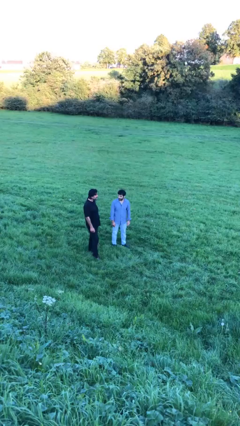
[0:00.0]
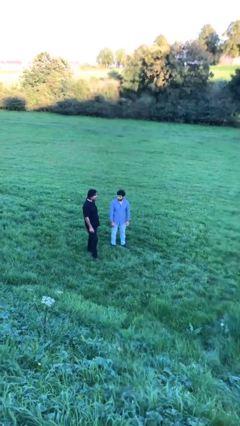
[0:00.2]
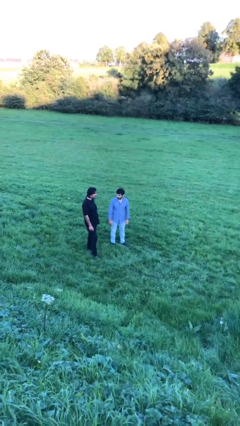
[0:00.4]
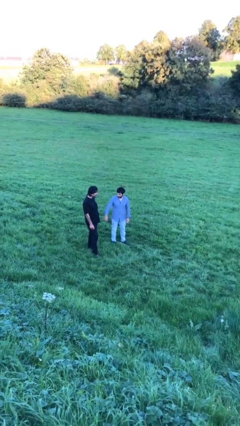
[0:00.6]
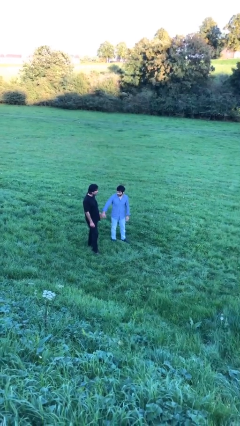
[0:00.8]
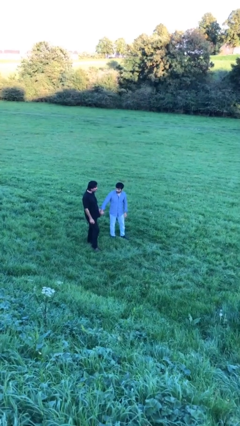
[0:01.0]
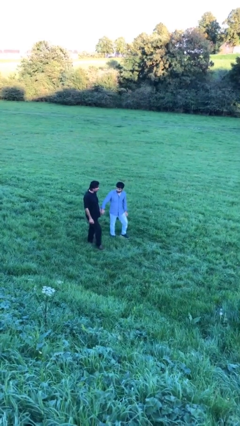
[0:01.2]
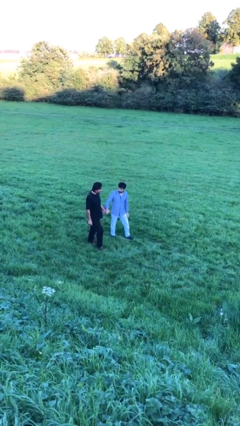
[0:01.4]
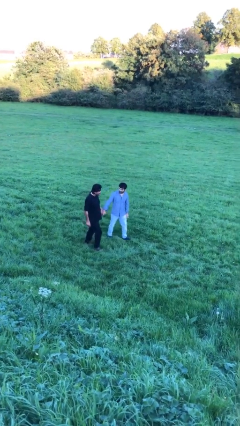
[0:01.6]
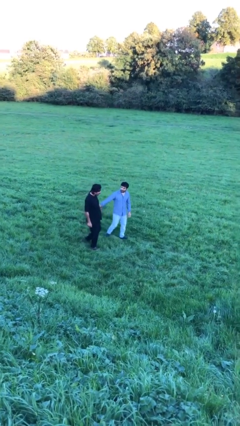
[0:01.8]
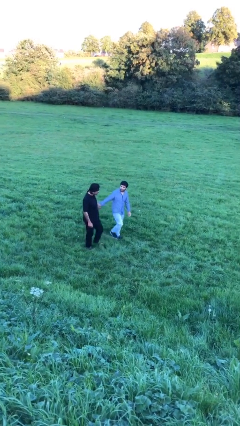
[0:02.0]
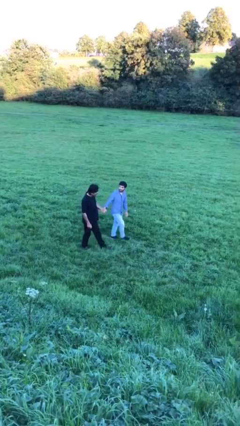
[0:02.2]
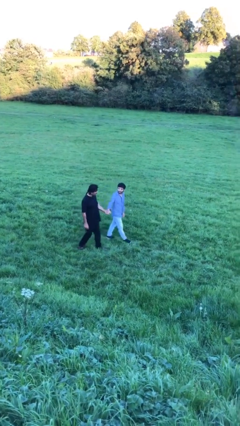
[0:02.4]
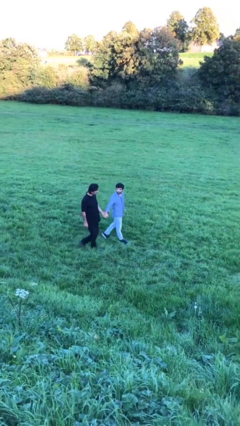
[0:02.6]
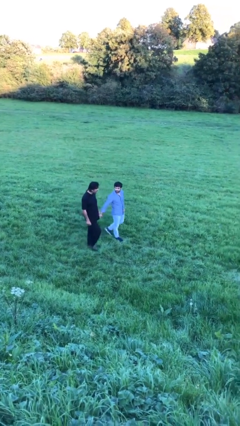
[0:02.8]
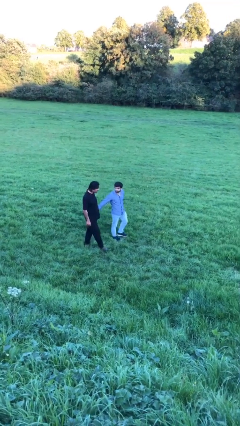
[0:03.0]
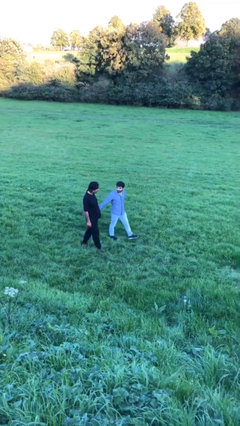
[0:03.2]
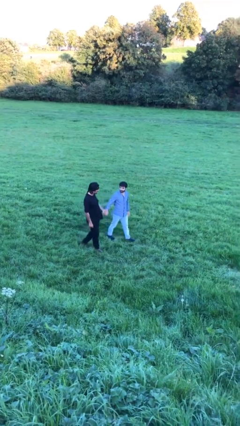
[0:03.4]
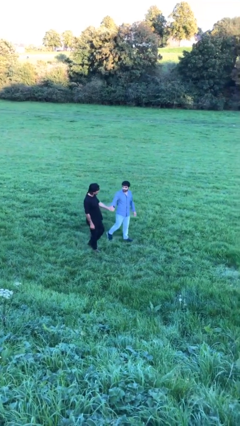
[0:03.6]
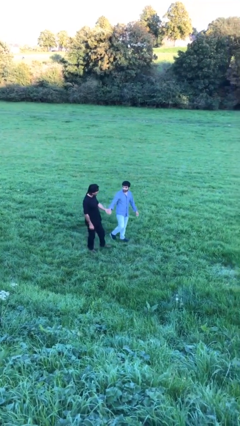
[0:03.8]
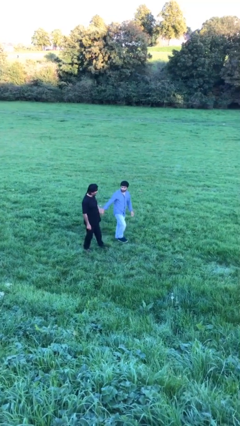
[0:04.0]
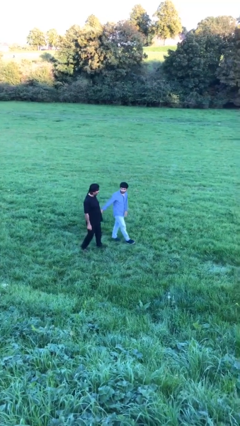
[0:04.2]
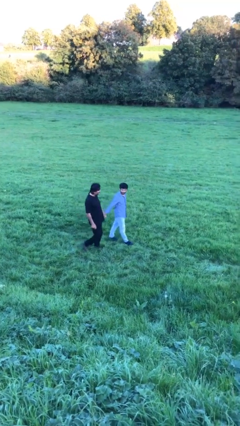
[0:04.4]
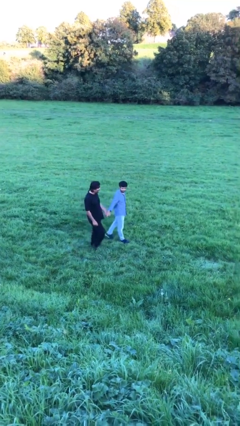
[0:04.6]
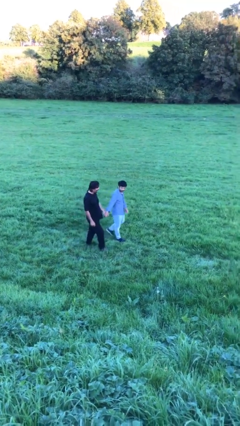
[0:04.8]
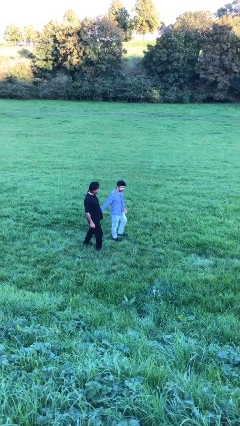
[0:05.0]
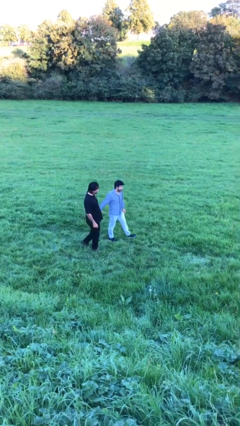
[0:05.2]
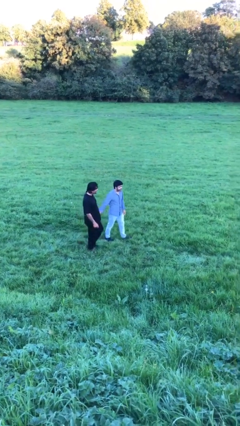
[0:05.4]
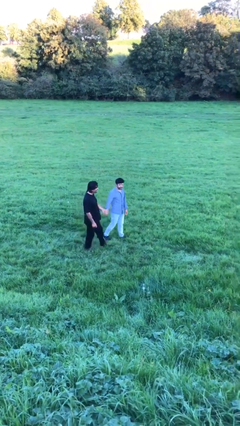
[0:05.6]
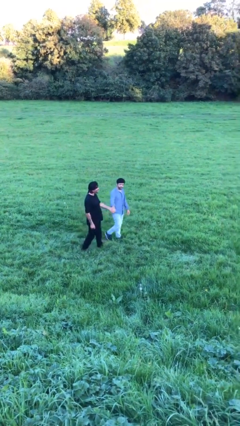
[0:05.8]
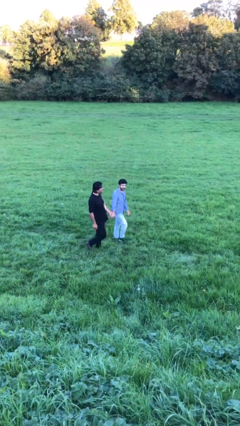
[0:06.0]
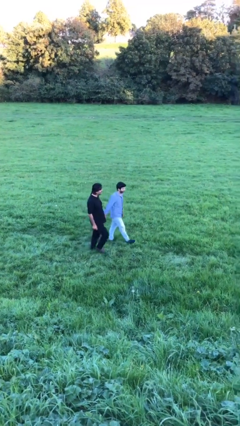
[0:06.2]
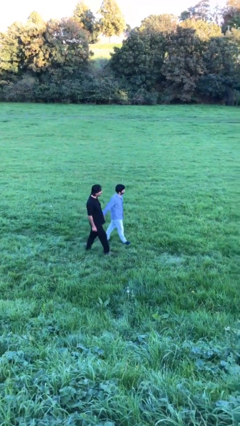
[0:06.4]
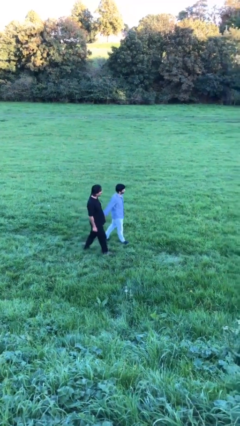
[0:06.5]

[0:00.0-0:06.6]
person holds hand

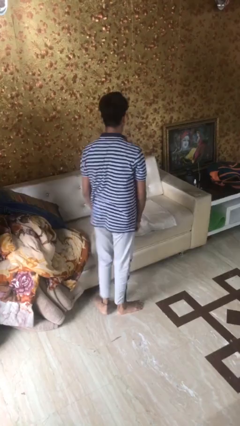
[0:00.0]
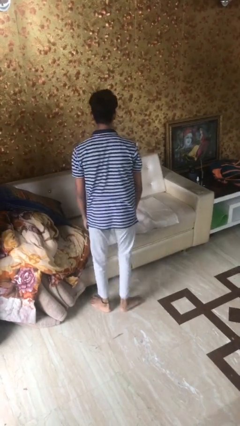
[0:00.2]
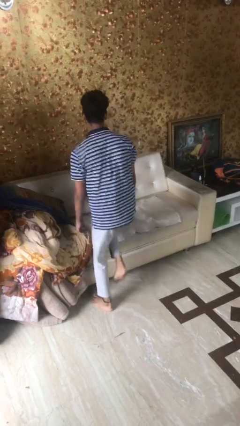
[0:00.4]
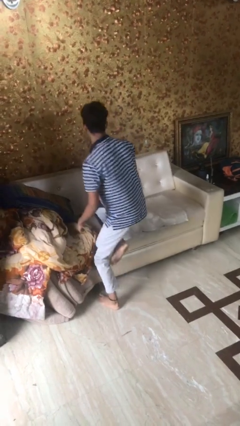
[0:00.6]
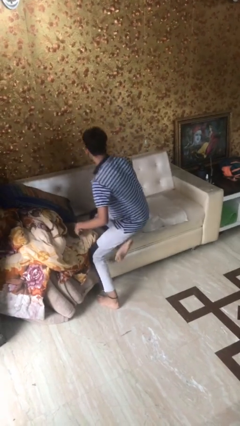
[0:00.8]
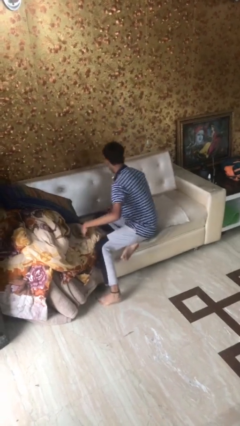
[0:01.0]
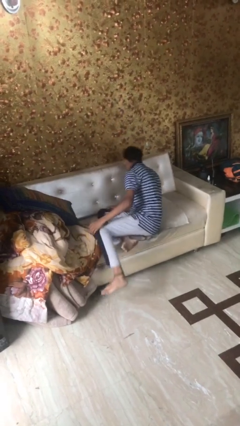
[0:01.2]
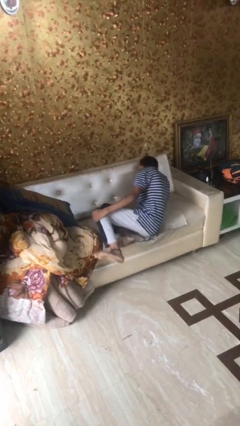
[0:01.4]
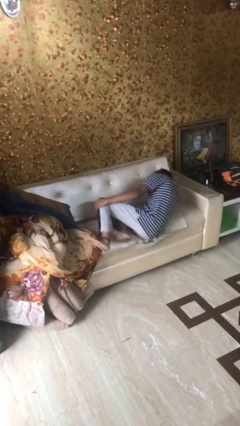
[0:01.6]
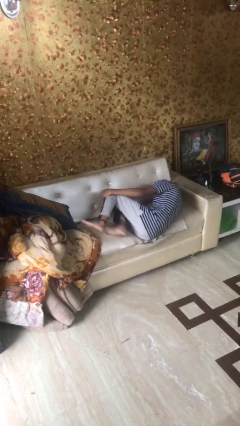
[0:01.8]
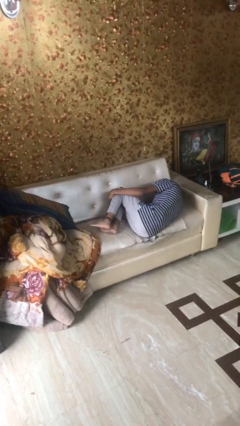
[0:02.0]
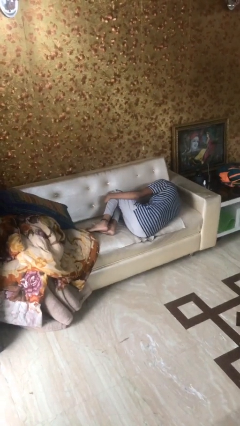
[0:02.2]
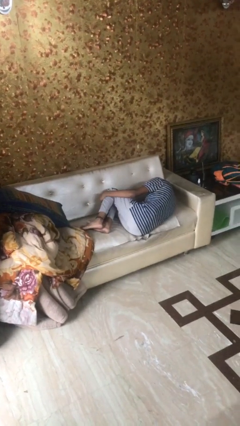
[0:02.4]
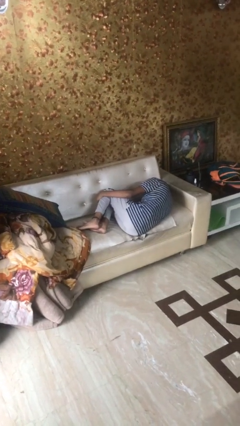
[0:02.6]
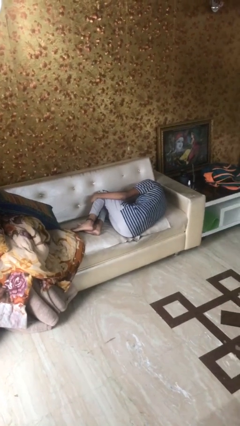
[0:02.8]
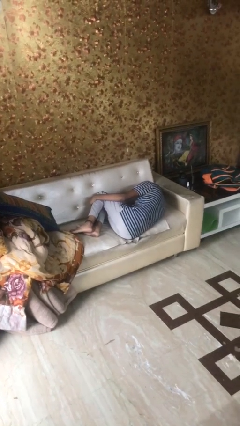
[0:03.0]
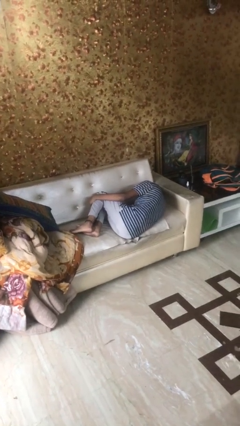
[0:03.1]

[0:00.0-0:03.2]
person lies down on couch

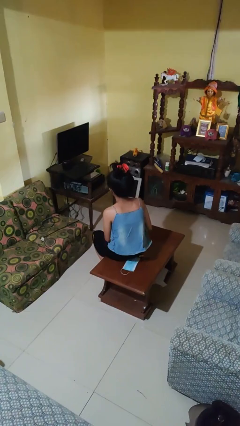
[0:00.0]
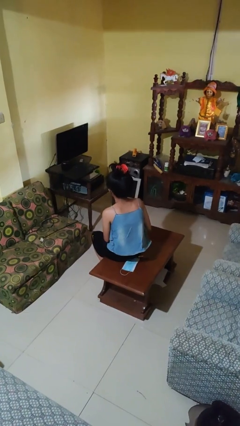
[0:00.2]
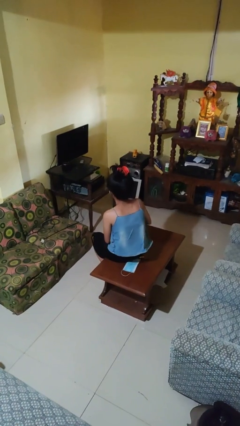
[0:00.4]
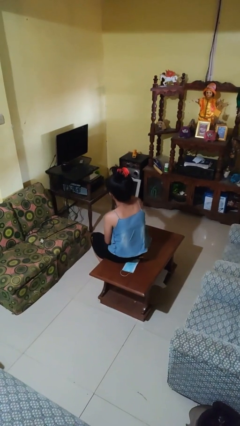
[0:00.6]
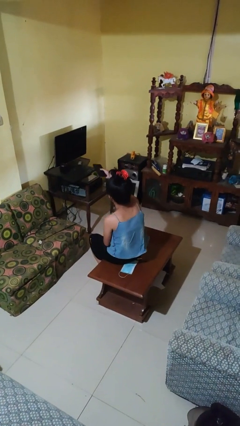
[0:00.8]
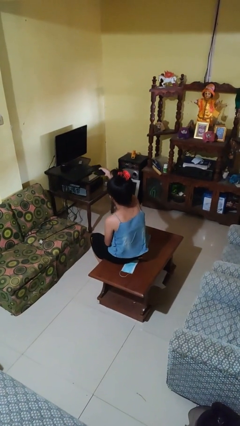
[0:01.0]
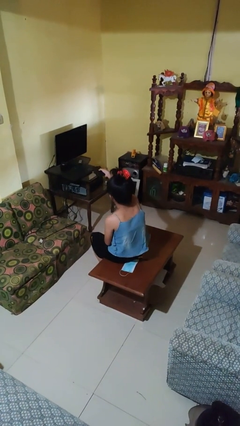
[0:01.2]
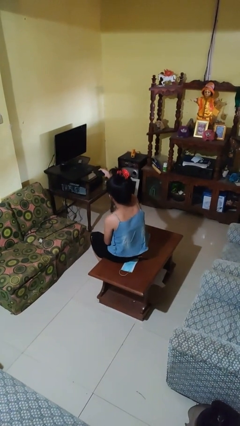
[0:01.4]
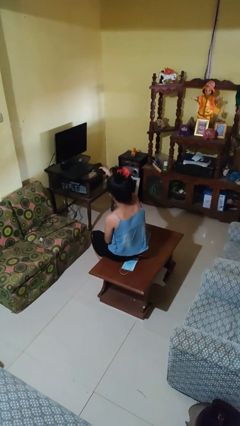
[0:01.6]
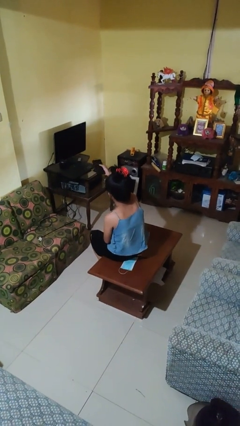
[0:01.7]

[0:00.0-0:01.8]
person uses television remote

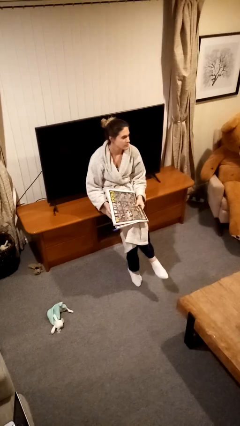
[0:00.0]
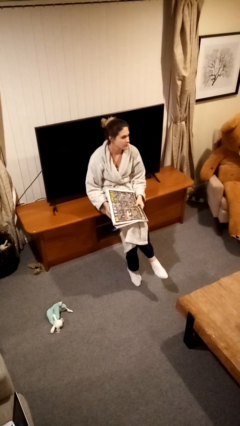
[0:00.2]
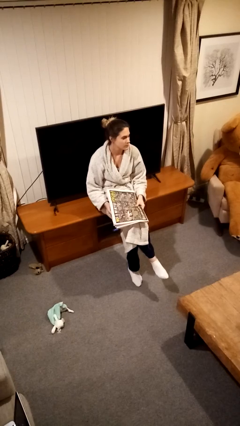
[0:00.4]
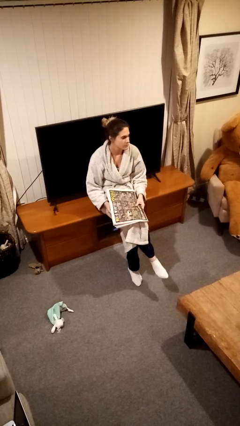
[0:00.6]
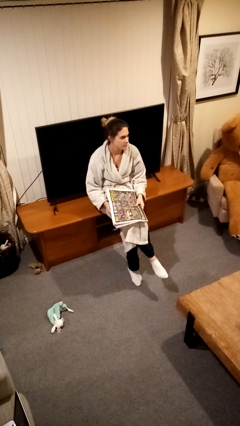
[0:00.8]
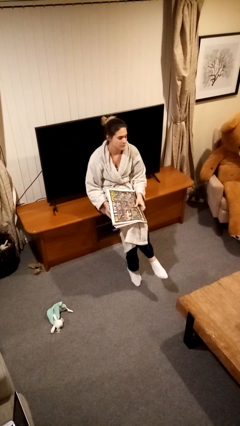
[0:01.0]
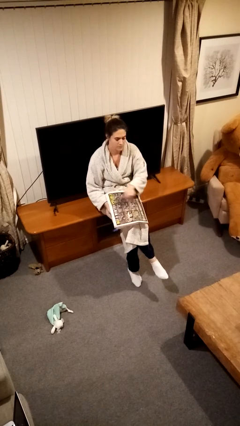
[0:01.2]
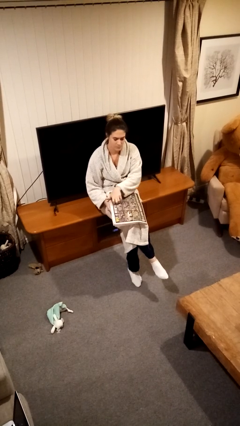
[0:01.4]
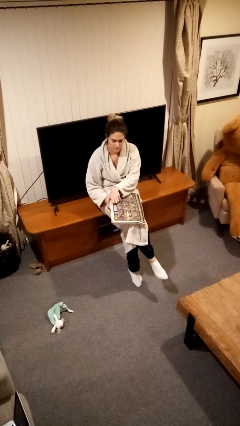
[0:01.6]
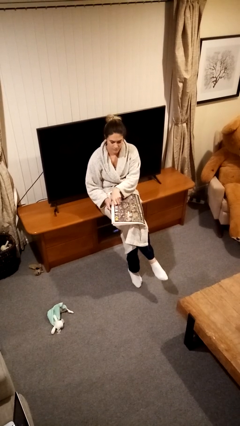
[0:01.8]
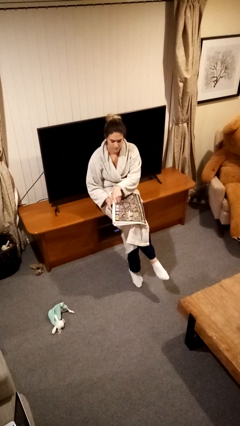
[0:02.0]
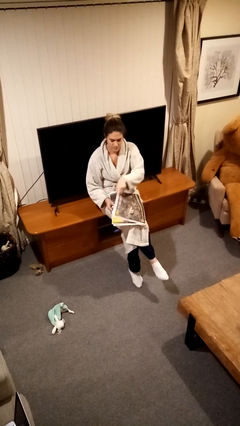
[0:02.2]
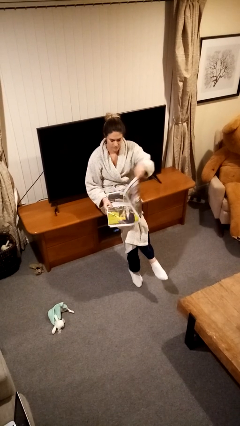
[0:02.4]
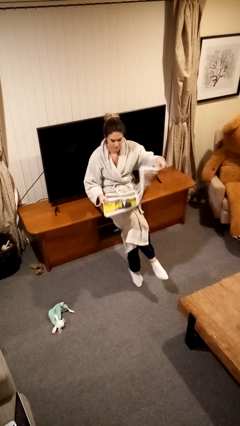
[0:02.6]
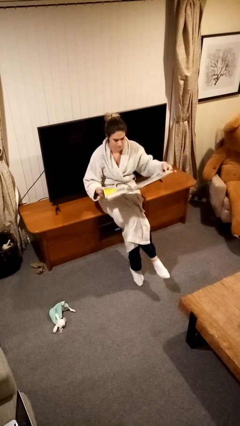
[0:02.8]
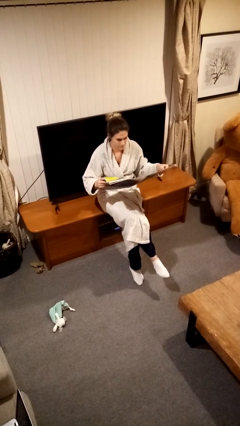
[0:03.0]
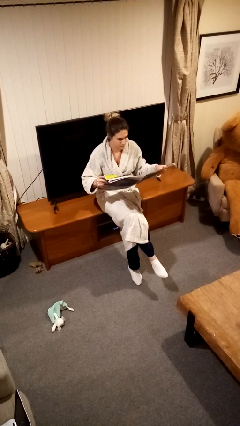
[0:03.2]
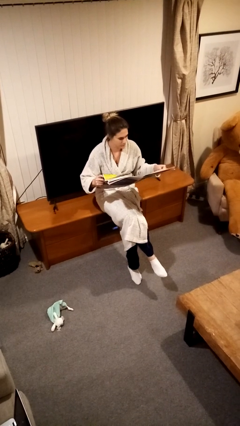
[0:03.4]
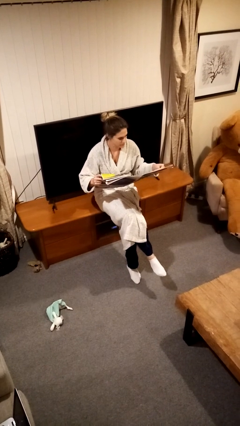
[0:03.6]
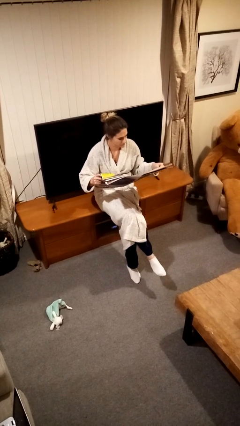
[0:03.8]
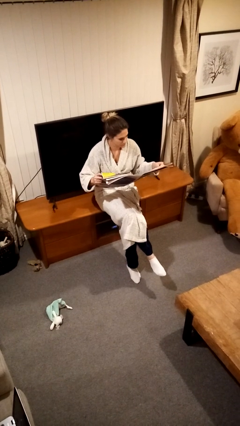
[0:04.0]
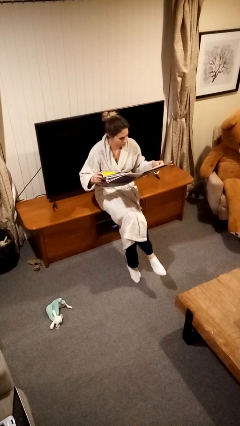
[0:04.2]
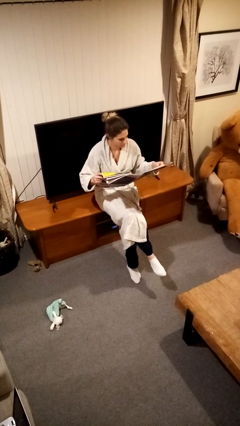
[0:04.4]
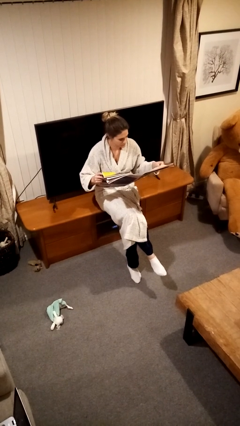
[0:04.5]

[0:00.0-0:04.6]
person reads newspaper

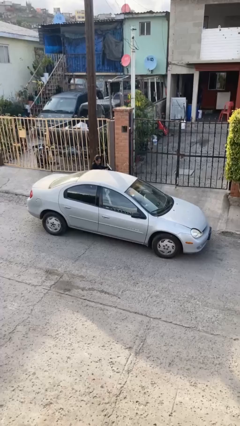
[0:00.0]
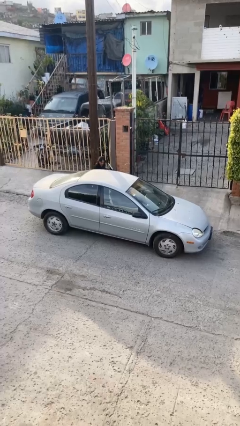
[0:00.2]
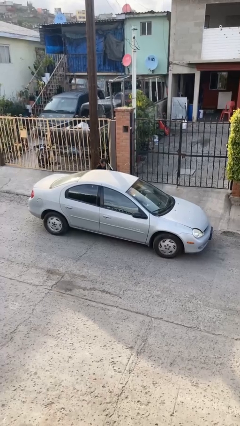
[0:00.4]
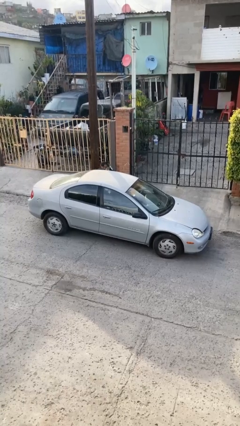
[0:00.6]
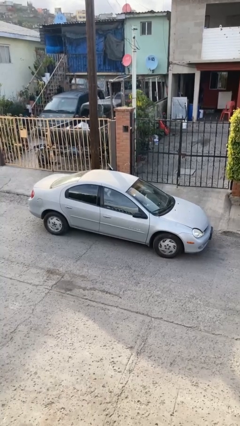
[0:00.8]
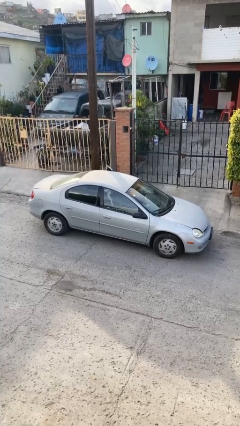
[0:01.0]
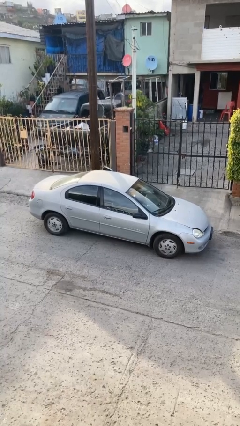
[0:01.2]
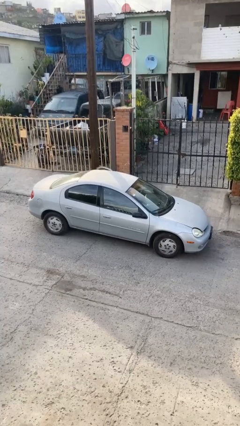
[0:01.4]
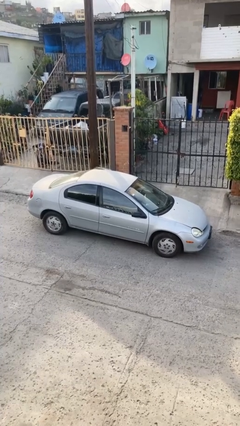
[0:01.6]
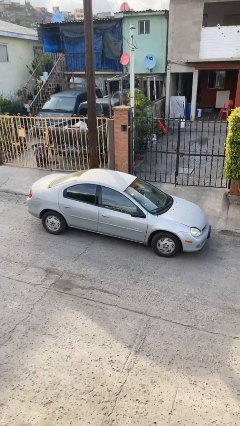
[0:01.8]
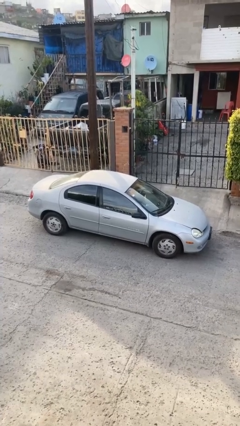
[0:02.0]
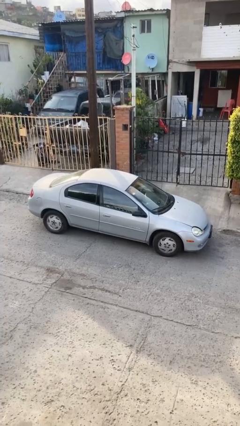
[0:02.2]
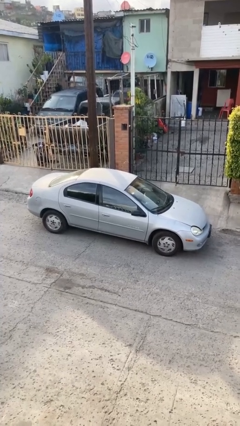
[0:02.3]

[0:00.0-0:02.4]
car picks up person
